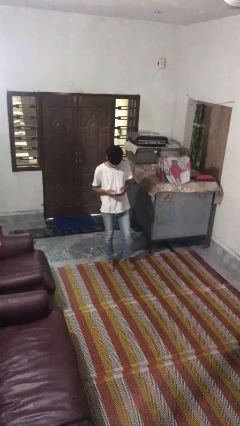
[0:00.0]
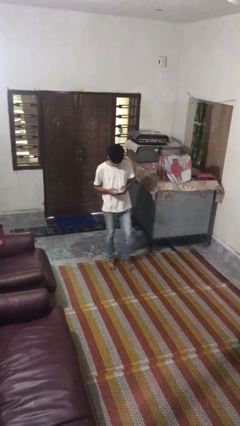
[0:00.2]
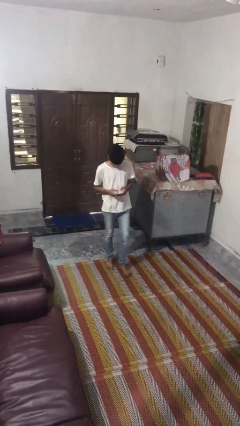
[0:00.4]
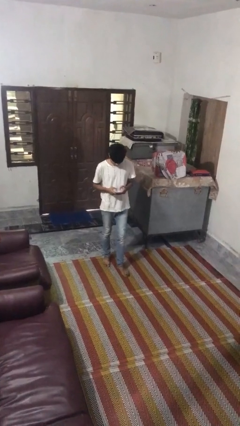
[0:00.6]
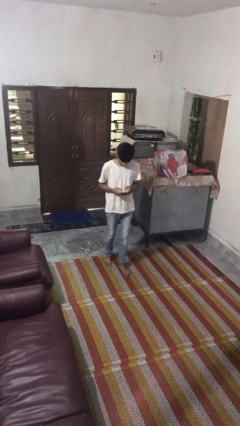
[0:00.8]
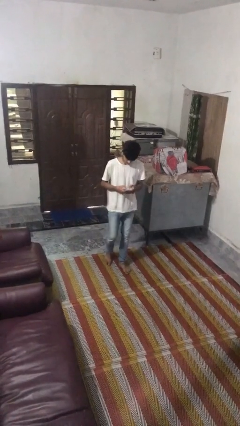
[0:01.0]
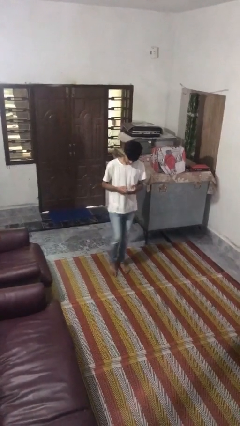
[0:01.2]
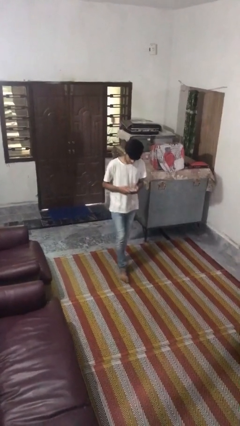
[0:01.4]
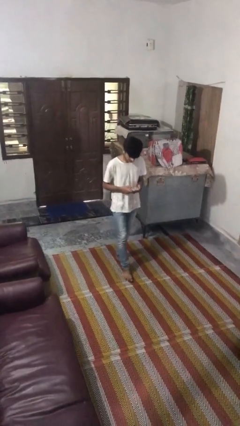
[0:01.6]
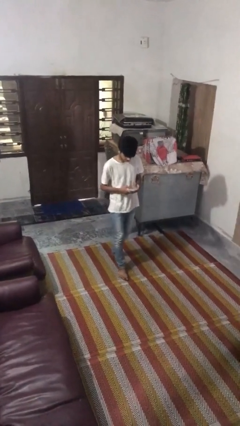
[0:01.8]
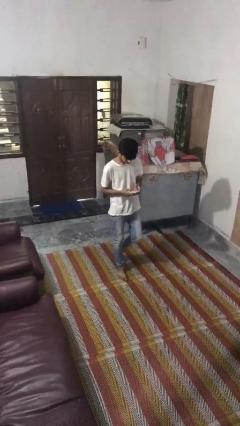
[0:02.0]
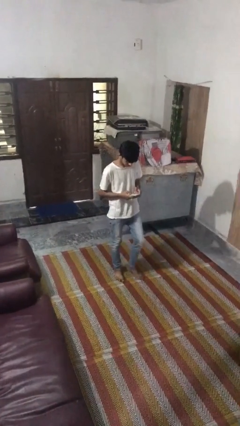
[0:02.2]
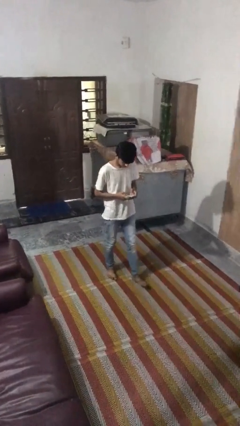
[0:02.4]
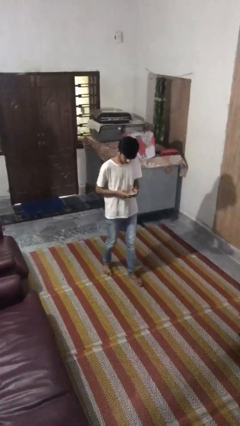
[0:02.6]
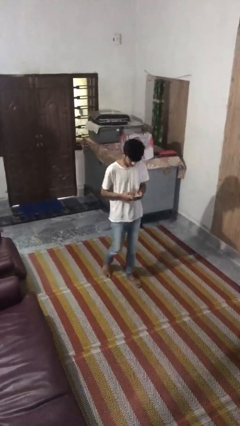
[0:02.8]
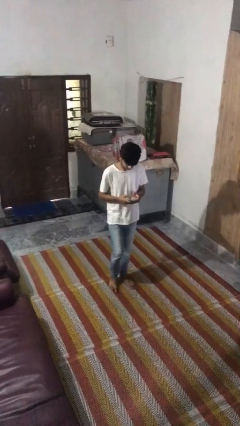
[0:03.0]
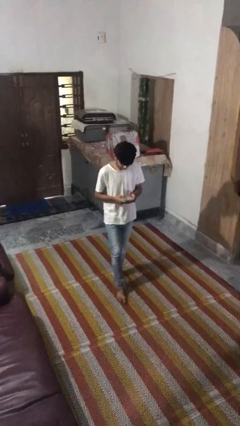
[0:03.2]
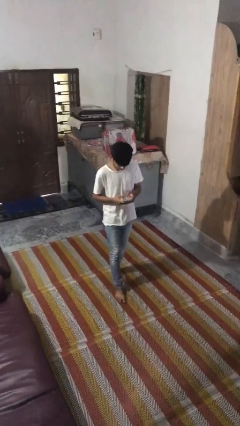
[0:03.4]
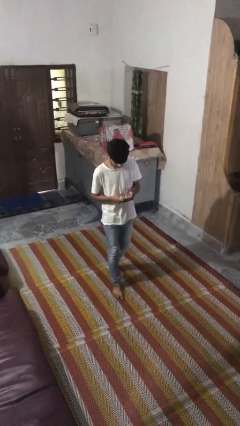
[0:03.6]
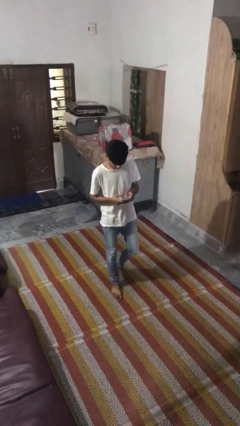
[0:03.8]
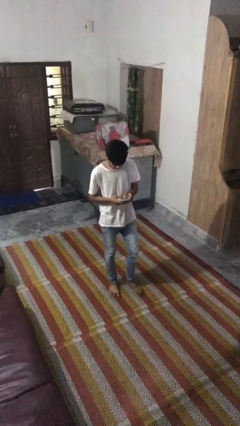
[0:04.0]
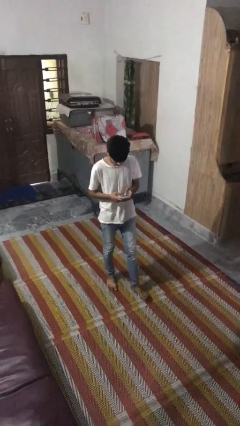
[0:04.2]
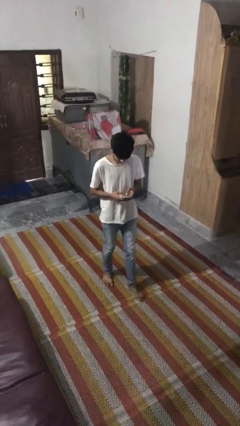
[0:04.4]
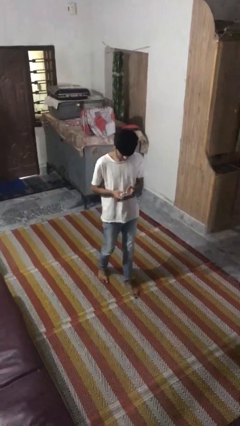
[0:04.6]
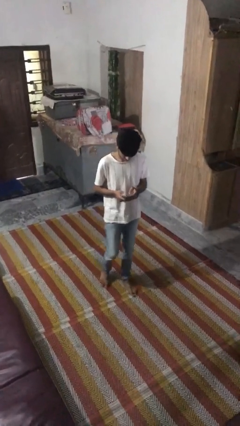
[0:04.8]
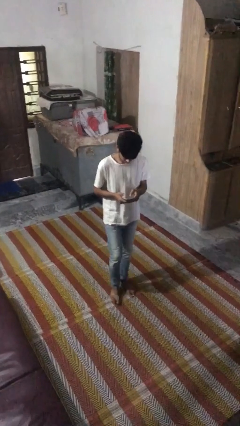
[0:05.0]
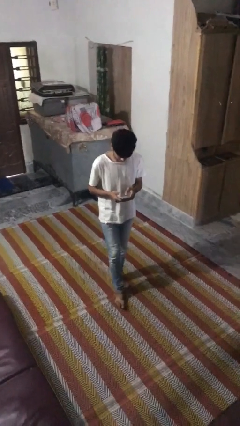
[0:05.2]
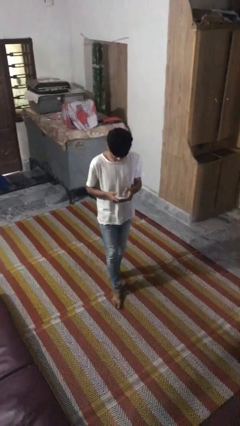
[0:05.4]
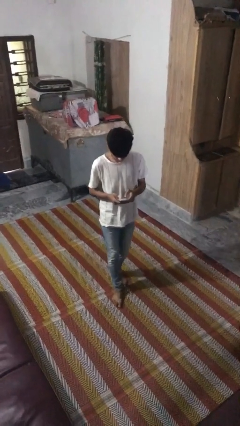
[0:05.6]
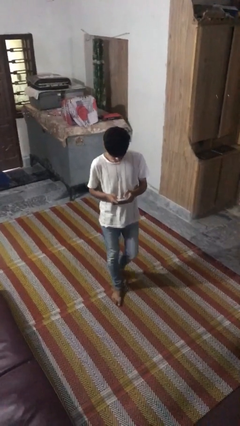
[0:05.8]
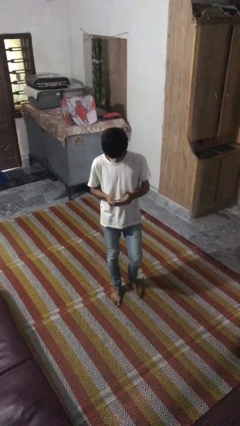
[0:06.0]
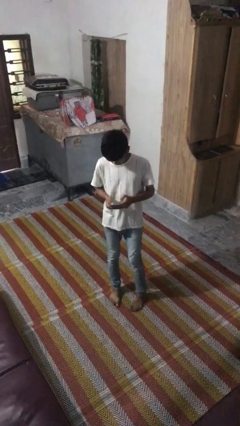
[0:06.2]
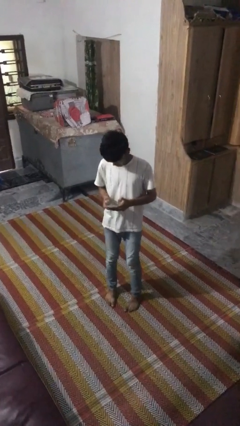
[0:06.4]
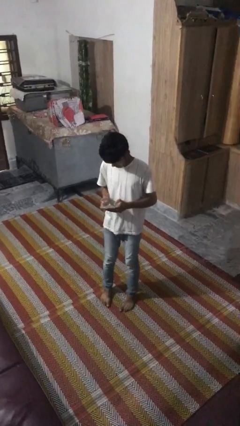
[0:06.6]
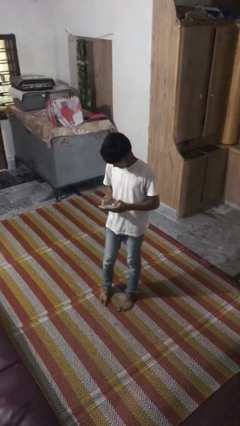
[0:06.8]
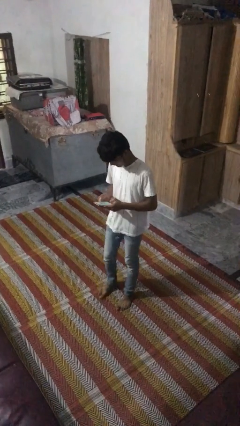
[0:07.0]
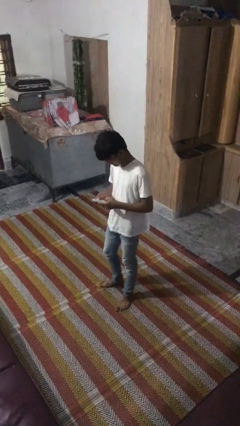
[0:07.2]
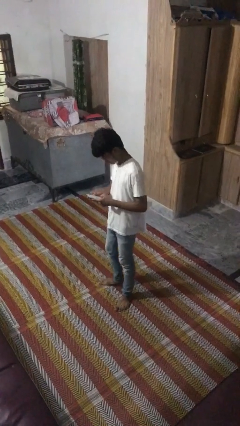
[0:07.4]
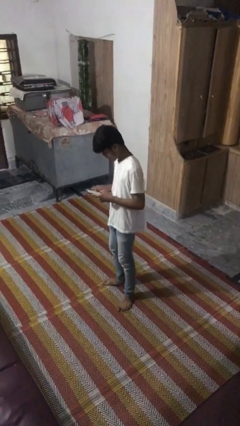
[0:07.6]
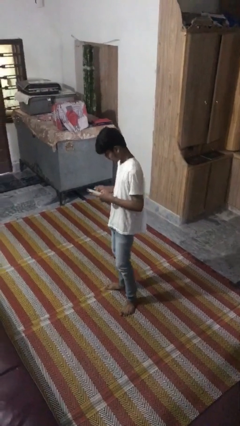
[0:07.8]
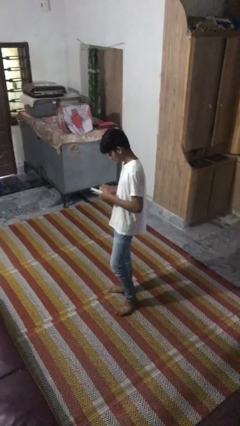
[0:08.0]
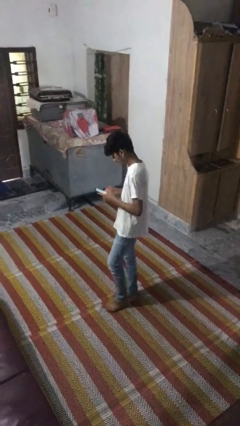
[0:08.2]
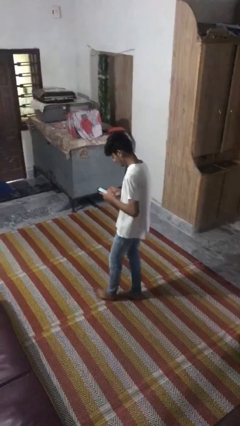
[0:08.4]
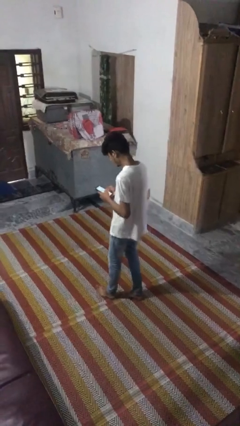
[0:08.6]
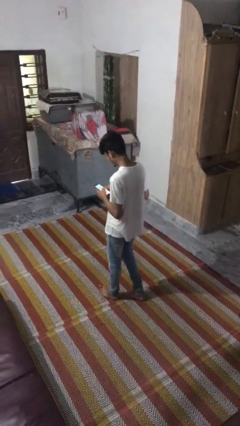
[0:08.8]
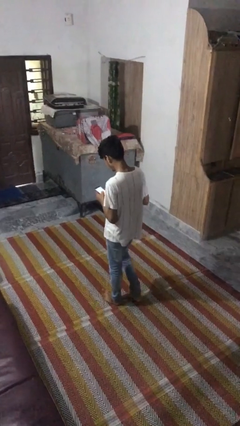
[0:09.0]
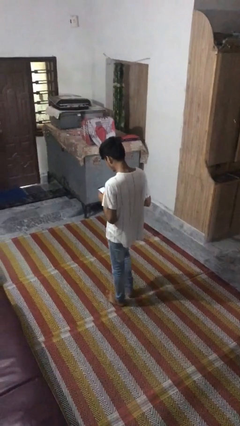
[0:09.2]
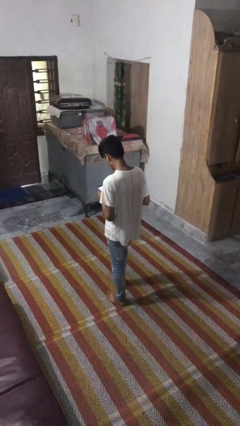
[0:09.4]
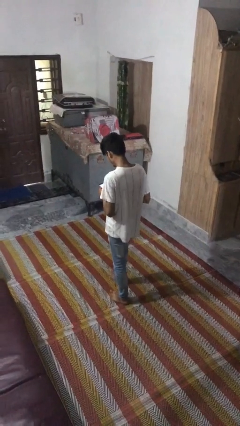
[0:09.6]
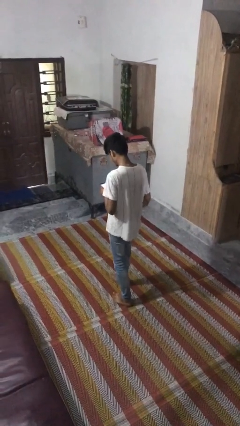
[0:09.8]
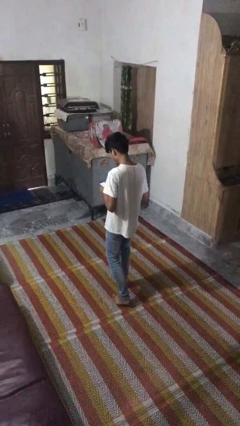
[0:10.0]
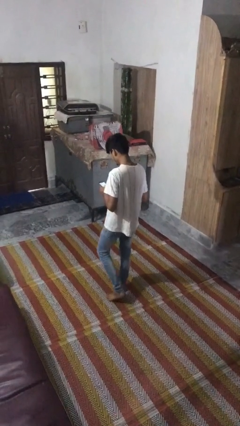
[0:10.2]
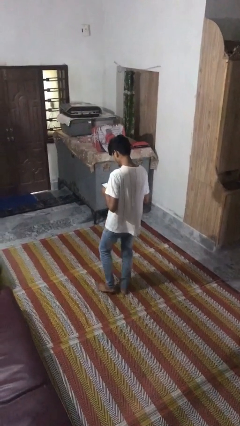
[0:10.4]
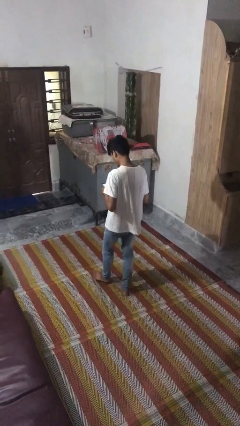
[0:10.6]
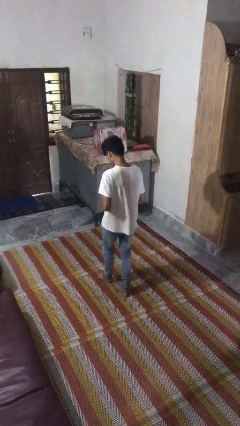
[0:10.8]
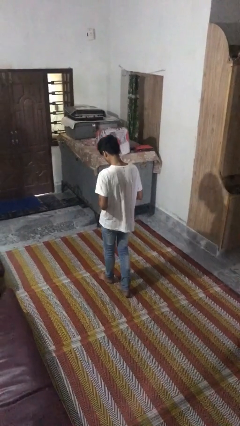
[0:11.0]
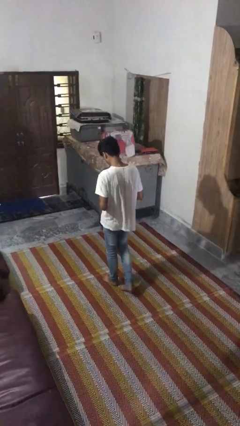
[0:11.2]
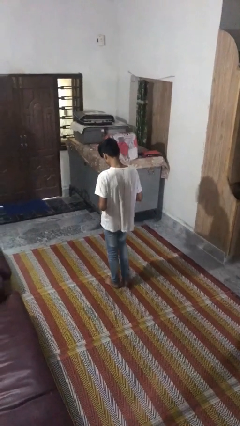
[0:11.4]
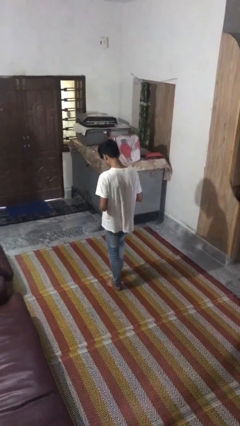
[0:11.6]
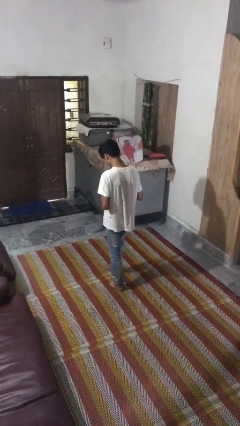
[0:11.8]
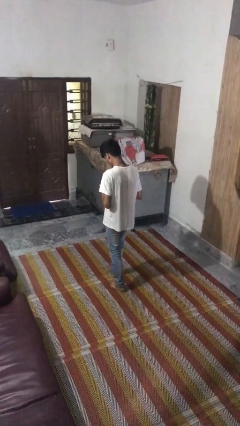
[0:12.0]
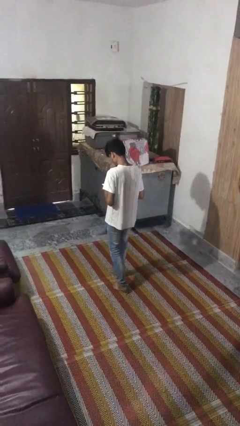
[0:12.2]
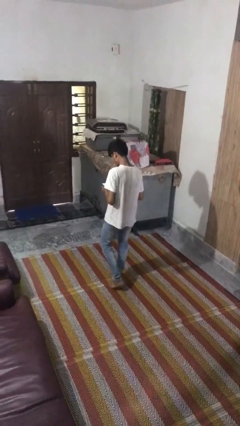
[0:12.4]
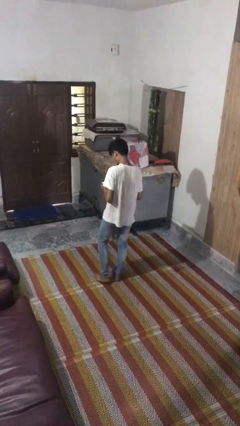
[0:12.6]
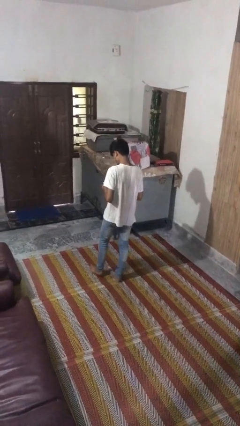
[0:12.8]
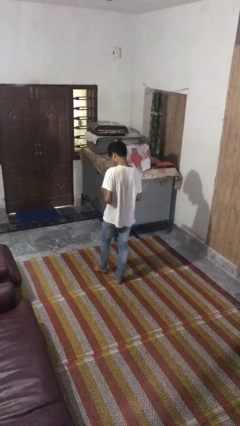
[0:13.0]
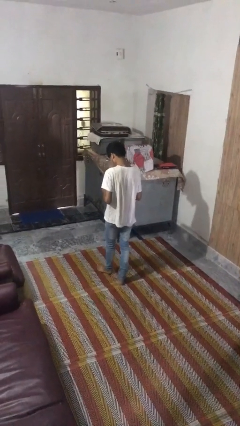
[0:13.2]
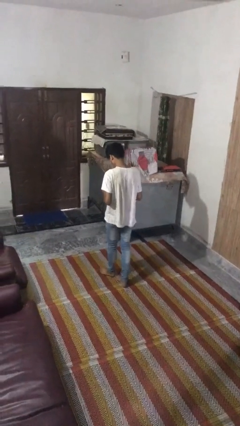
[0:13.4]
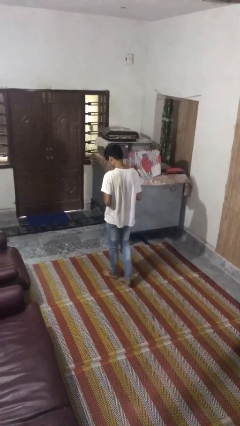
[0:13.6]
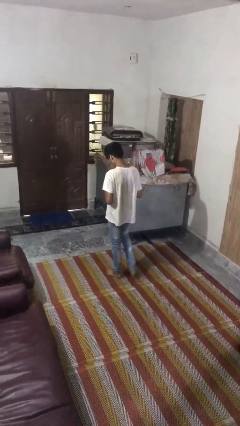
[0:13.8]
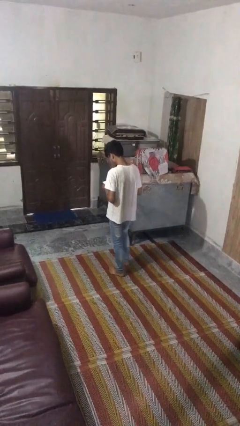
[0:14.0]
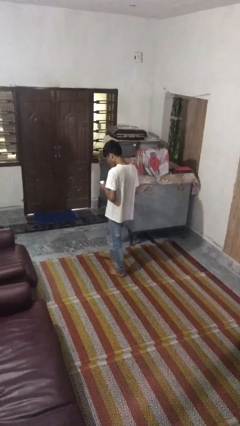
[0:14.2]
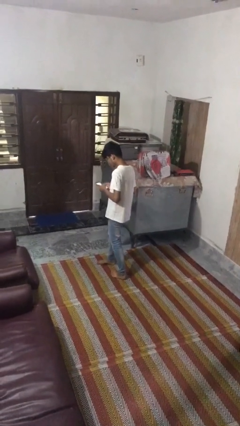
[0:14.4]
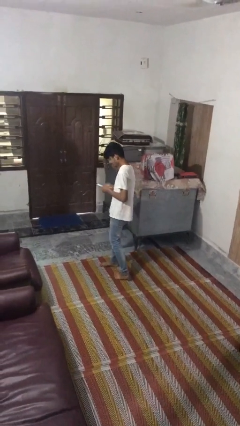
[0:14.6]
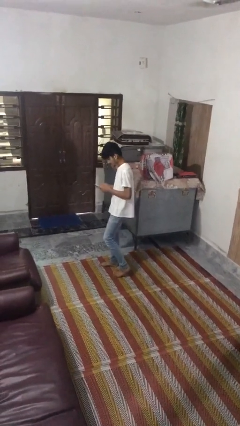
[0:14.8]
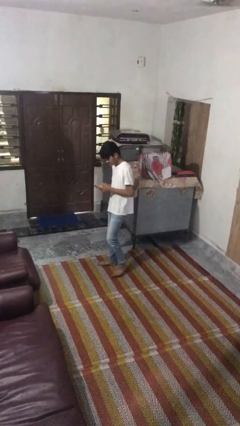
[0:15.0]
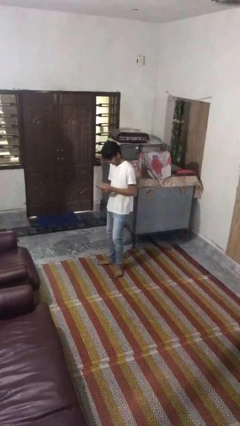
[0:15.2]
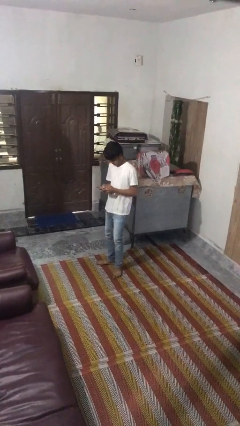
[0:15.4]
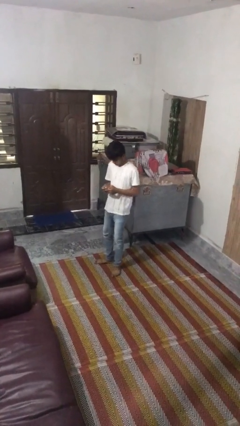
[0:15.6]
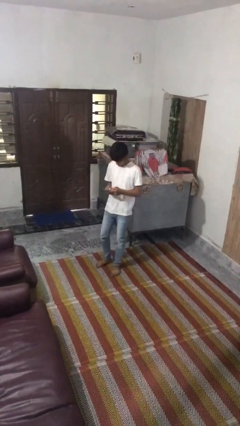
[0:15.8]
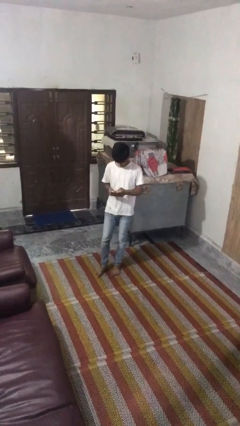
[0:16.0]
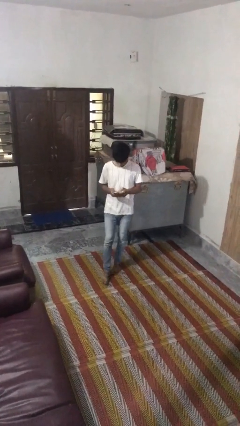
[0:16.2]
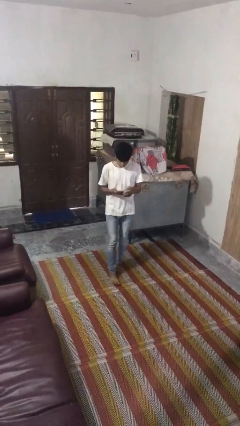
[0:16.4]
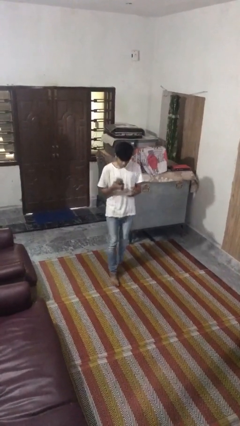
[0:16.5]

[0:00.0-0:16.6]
person texts on phone

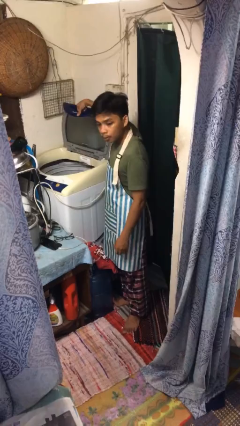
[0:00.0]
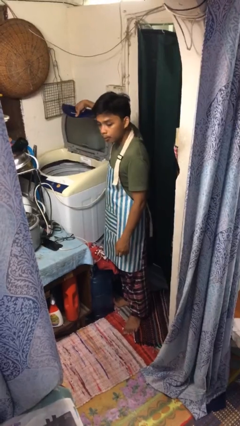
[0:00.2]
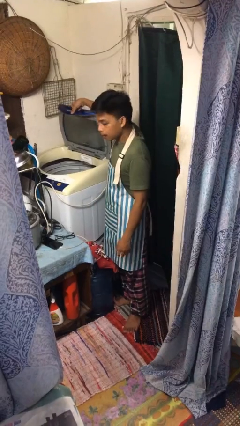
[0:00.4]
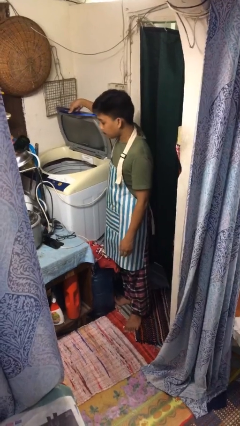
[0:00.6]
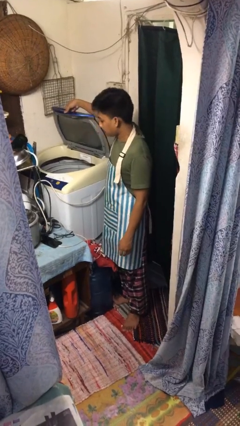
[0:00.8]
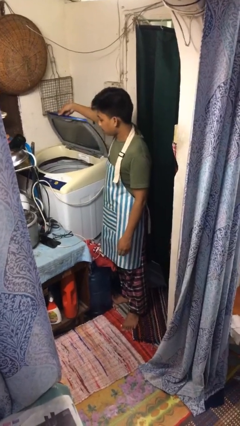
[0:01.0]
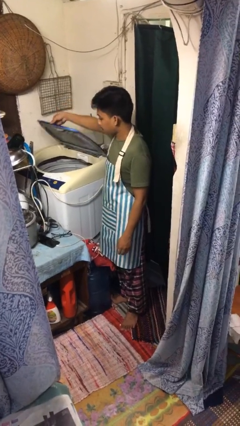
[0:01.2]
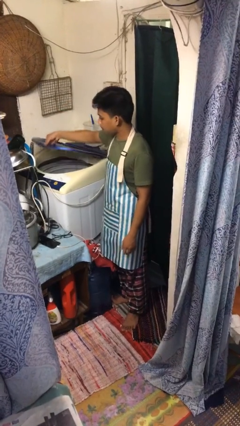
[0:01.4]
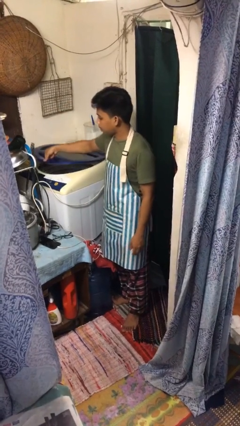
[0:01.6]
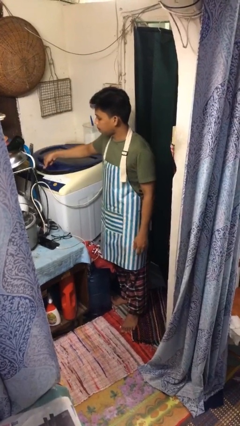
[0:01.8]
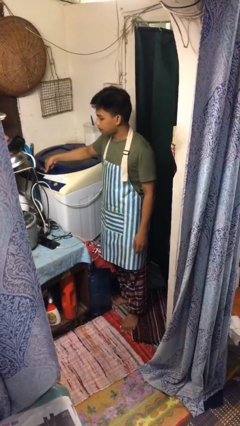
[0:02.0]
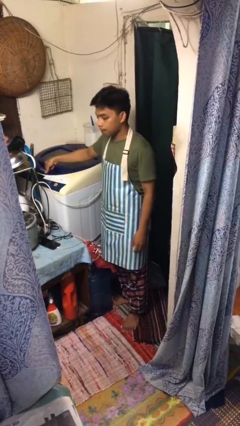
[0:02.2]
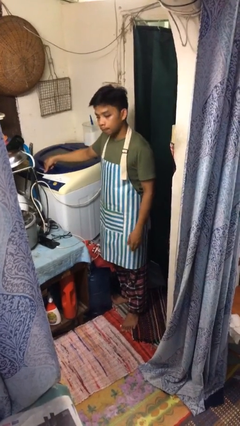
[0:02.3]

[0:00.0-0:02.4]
person closes clothes washer
